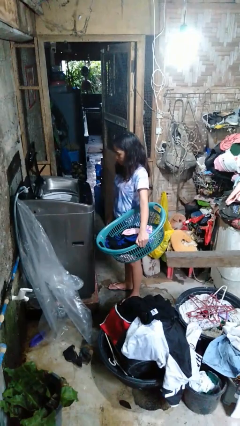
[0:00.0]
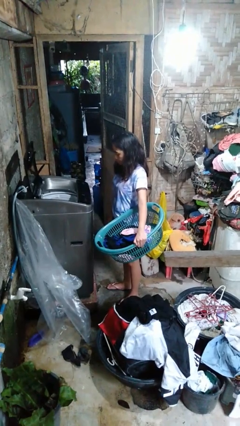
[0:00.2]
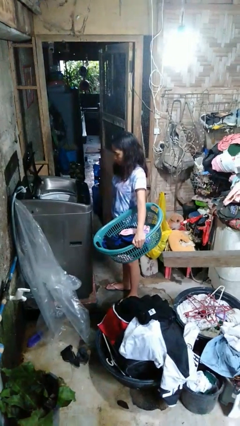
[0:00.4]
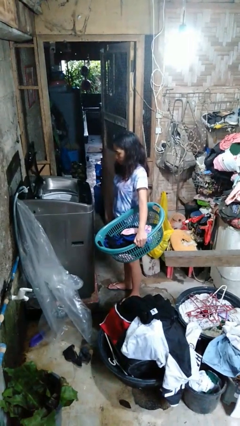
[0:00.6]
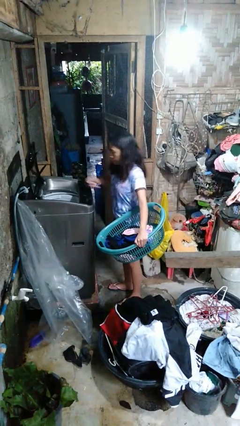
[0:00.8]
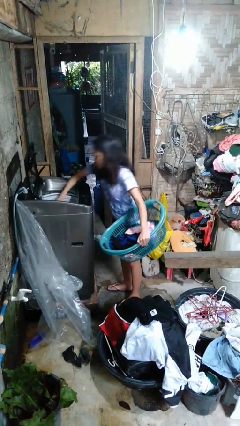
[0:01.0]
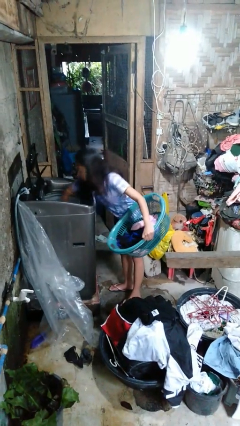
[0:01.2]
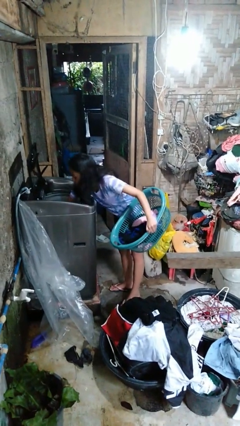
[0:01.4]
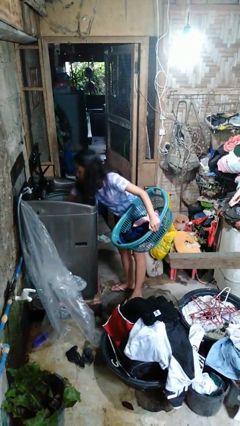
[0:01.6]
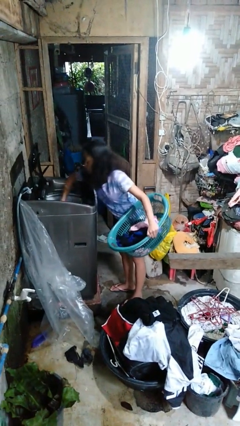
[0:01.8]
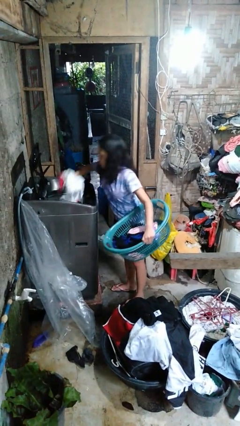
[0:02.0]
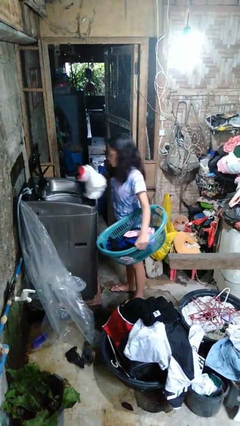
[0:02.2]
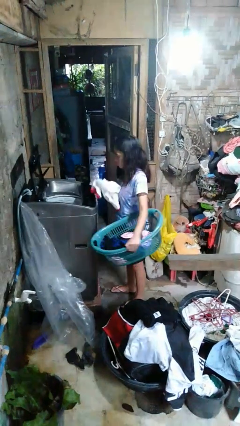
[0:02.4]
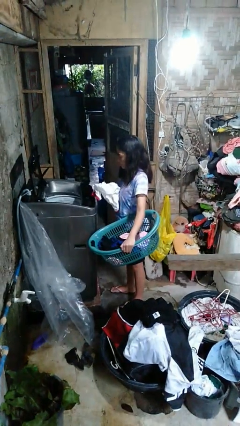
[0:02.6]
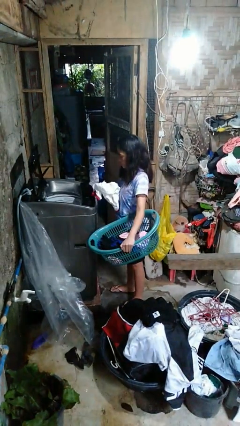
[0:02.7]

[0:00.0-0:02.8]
person unloads clotheswasher

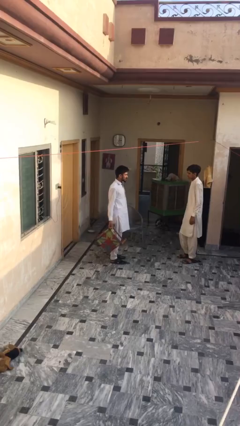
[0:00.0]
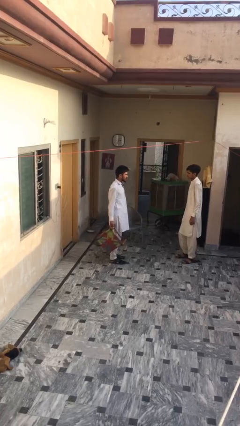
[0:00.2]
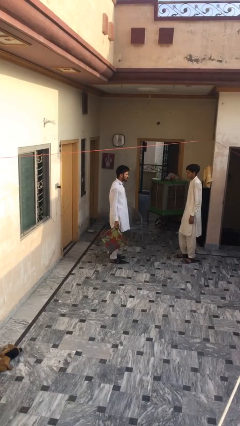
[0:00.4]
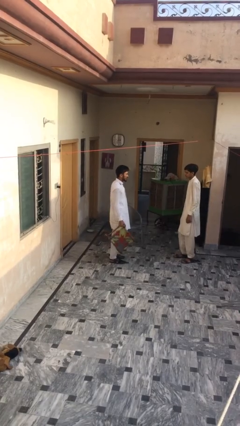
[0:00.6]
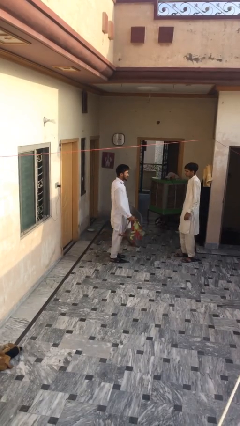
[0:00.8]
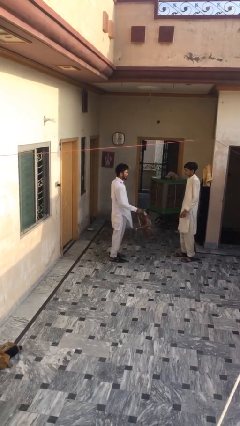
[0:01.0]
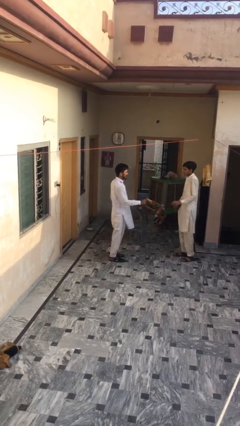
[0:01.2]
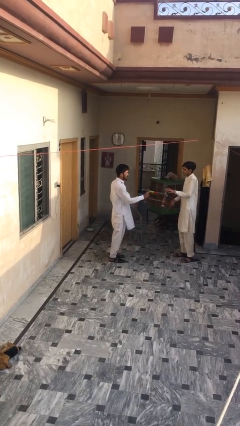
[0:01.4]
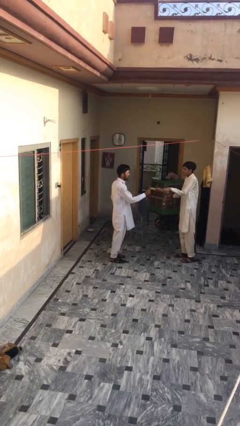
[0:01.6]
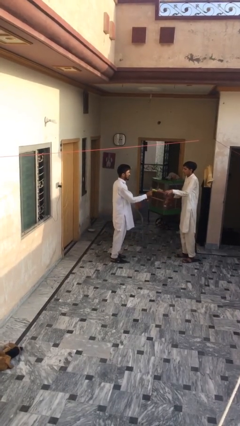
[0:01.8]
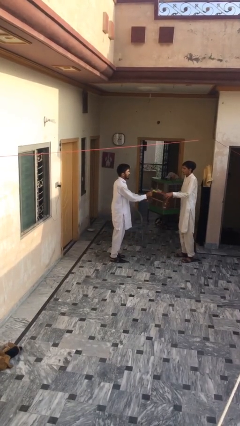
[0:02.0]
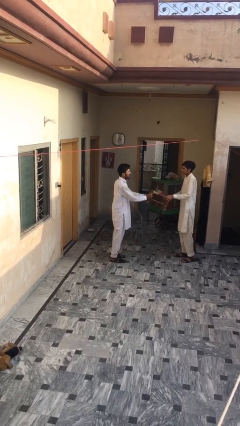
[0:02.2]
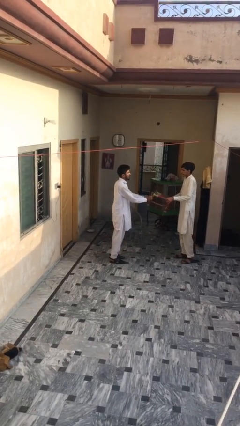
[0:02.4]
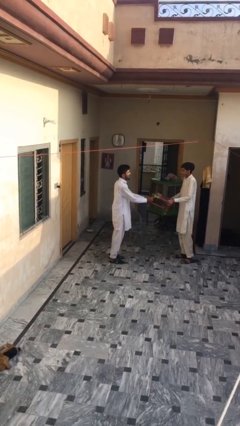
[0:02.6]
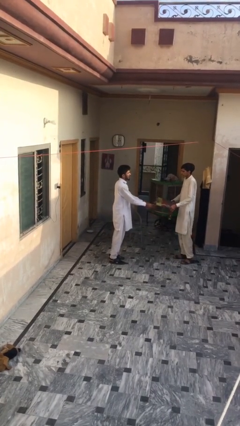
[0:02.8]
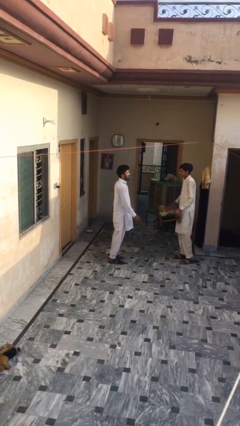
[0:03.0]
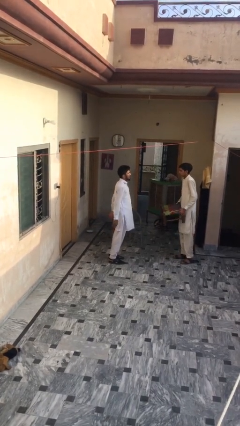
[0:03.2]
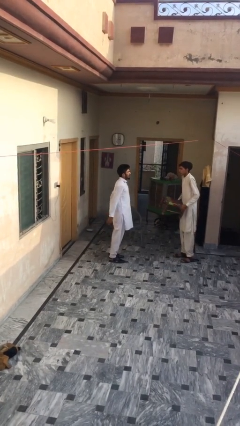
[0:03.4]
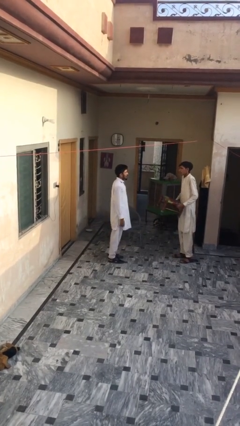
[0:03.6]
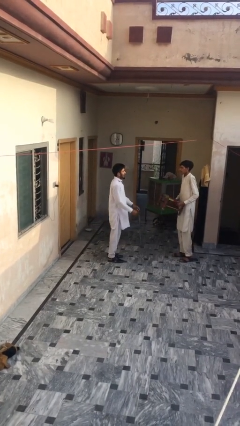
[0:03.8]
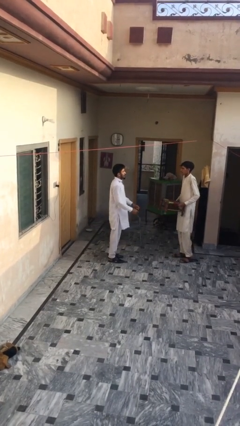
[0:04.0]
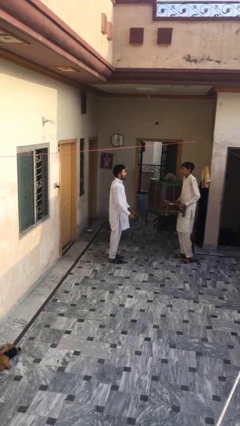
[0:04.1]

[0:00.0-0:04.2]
person transfers object to person

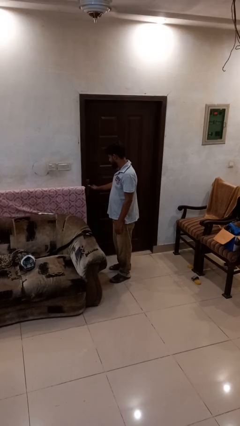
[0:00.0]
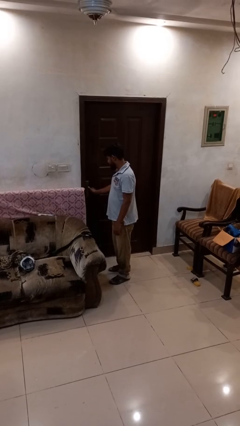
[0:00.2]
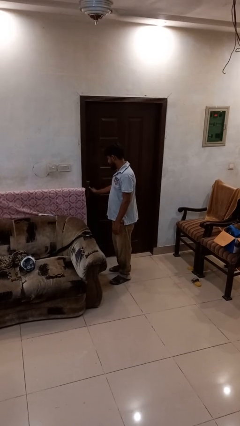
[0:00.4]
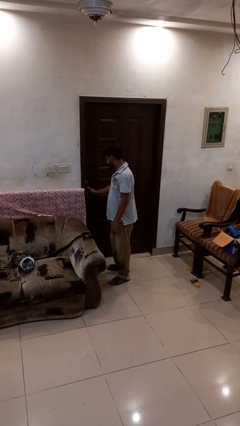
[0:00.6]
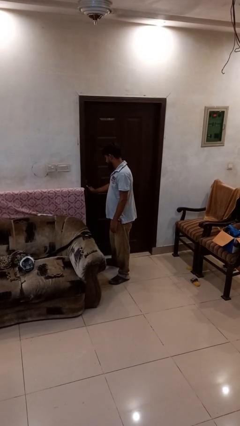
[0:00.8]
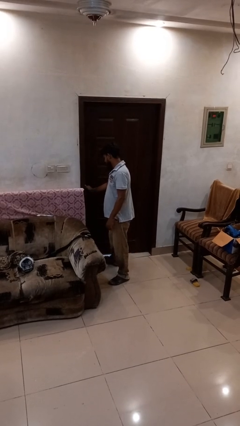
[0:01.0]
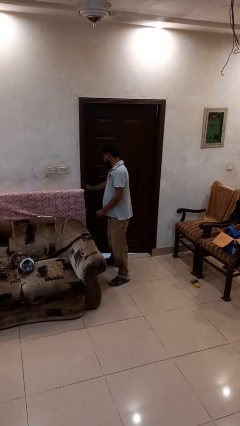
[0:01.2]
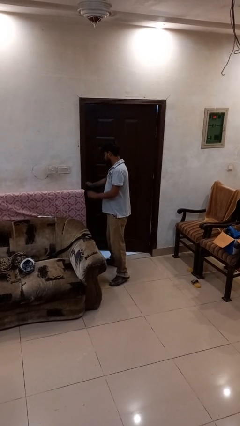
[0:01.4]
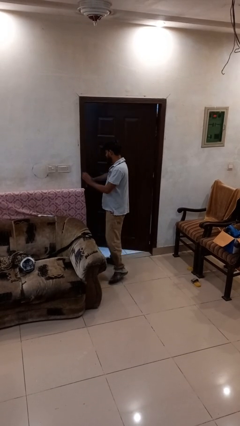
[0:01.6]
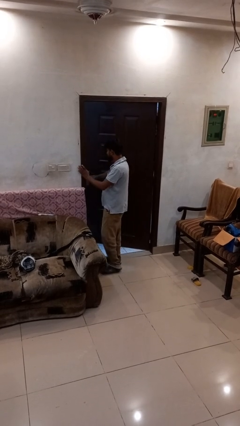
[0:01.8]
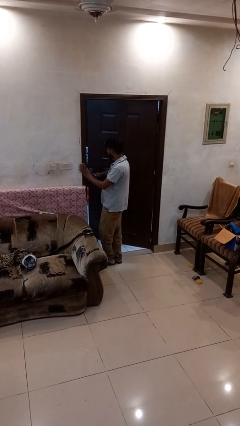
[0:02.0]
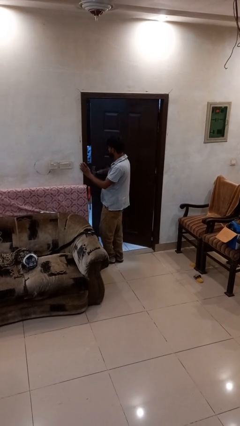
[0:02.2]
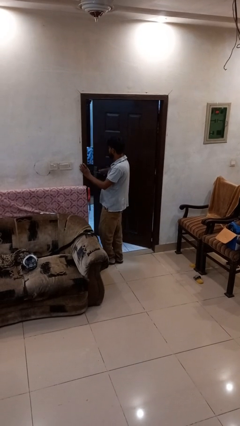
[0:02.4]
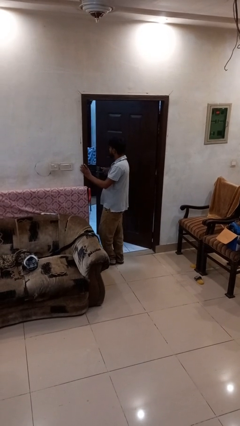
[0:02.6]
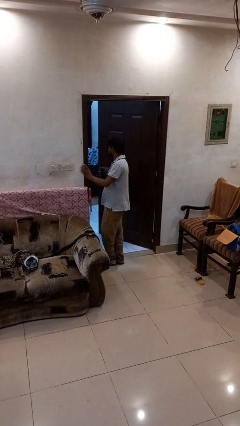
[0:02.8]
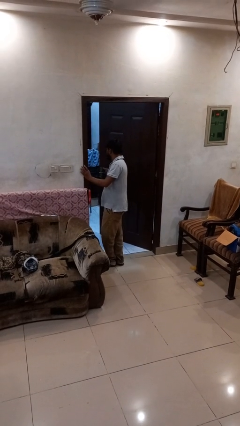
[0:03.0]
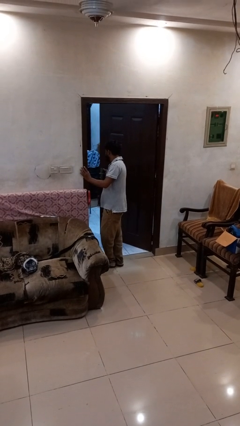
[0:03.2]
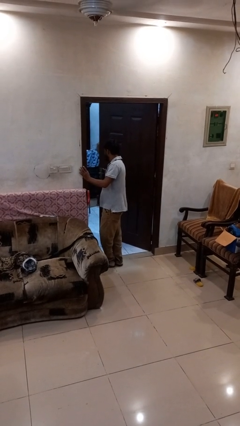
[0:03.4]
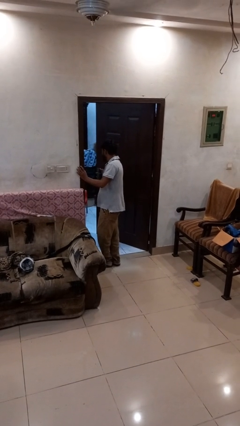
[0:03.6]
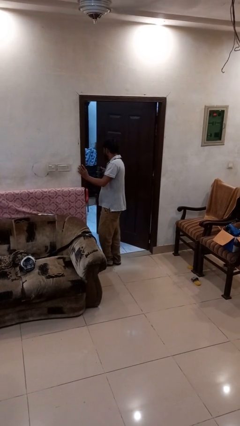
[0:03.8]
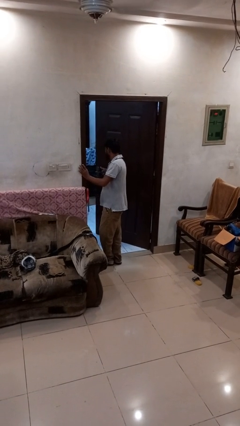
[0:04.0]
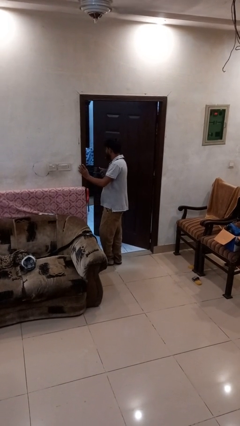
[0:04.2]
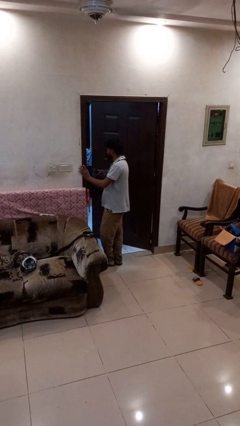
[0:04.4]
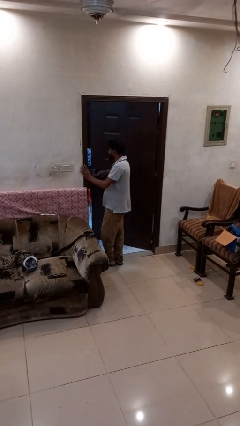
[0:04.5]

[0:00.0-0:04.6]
person opens facility door

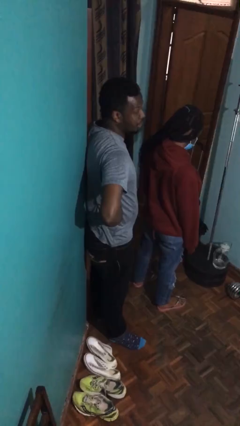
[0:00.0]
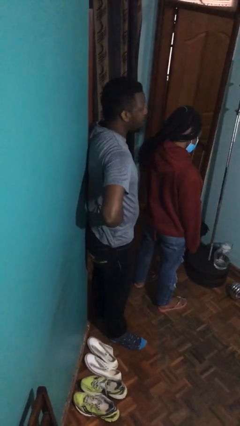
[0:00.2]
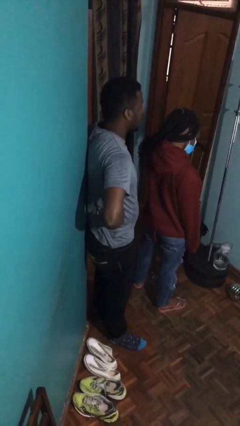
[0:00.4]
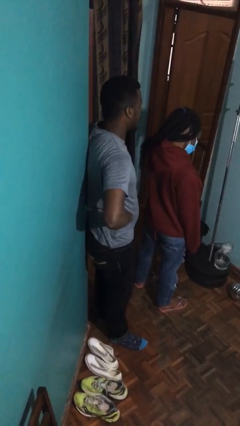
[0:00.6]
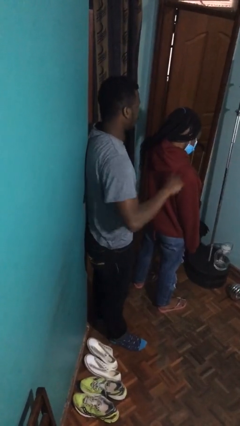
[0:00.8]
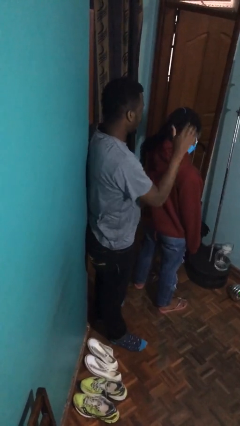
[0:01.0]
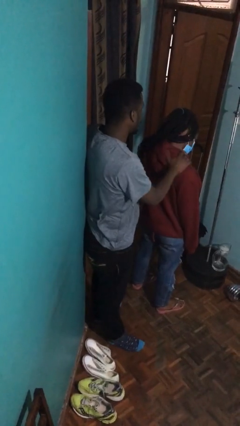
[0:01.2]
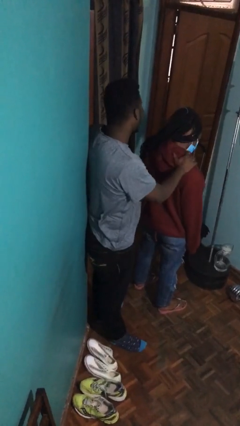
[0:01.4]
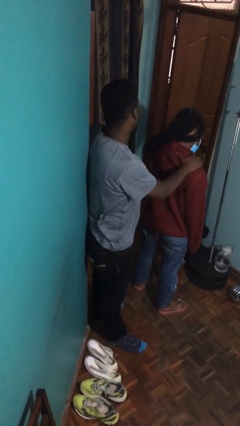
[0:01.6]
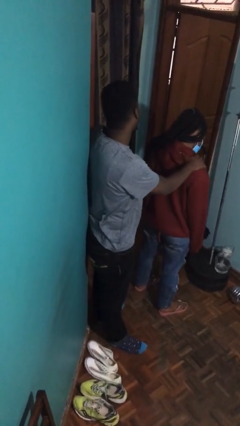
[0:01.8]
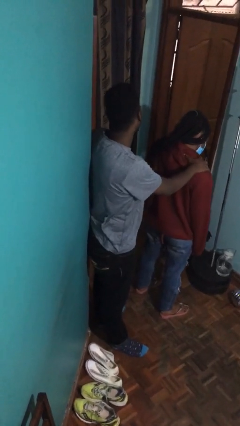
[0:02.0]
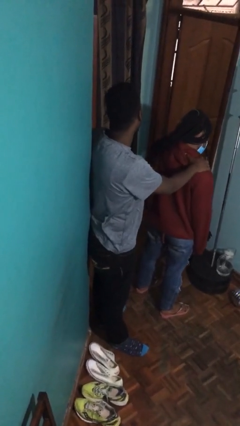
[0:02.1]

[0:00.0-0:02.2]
person grabs person by shoulder

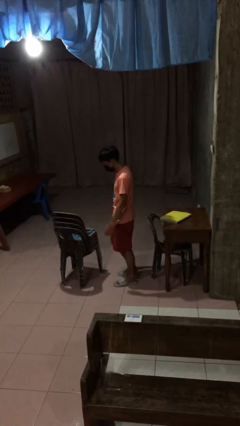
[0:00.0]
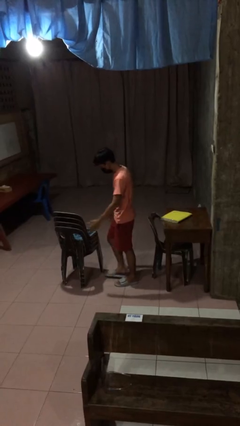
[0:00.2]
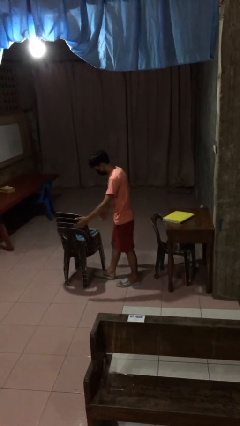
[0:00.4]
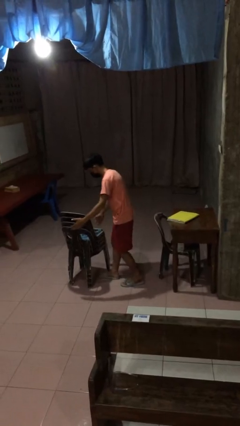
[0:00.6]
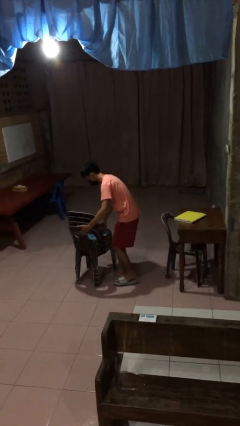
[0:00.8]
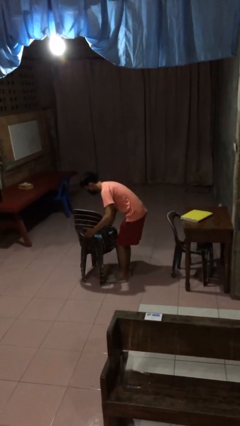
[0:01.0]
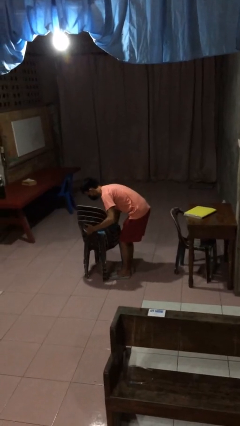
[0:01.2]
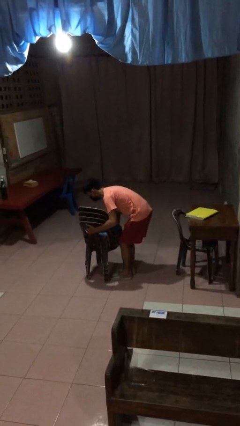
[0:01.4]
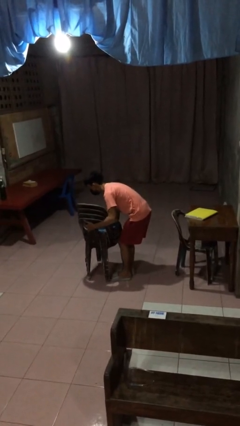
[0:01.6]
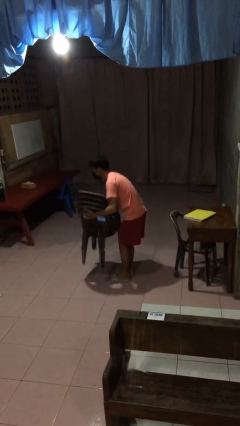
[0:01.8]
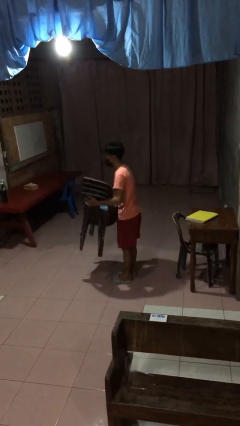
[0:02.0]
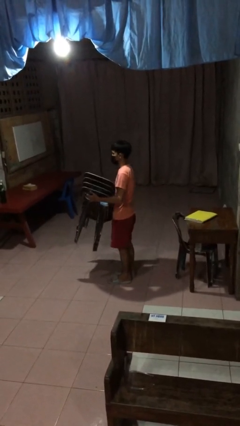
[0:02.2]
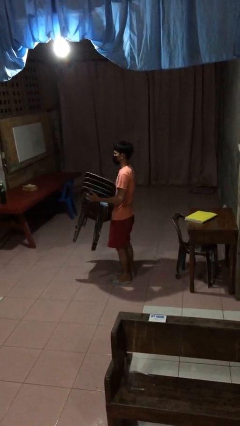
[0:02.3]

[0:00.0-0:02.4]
person picks up object from floor

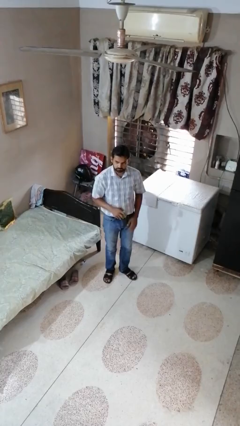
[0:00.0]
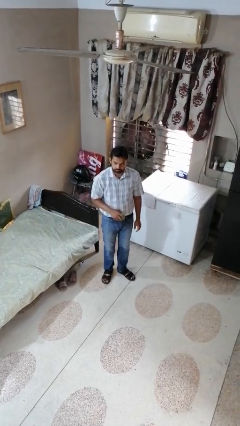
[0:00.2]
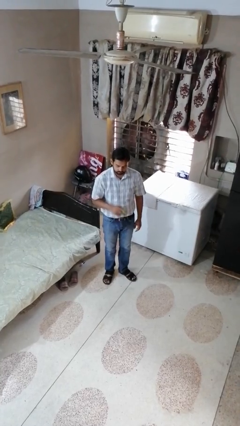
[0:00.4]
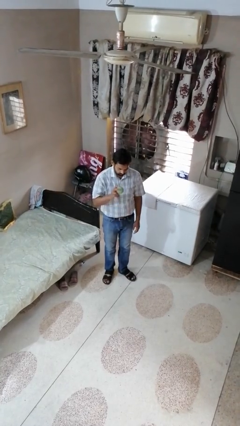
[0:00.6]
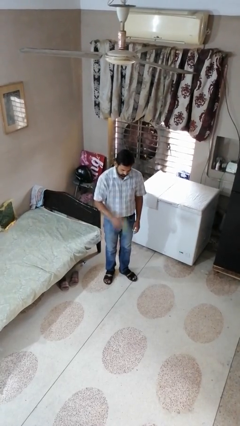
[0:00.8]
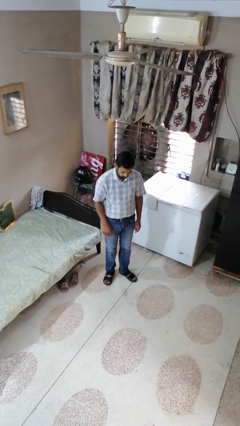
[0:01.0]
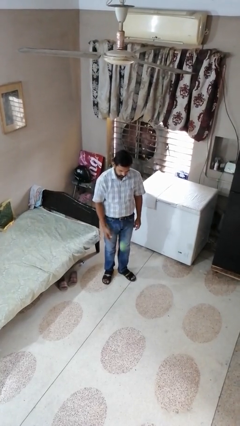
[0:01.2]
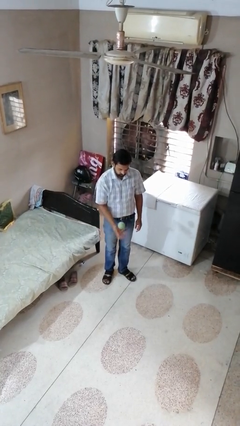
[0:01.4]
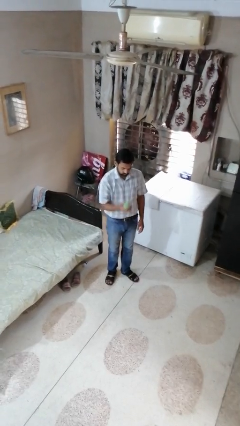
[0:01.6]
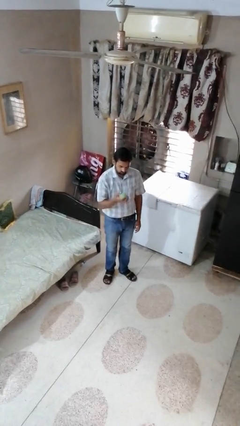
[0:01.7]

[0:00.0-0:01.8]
person bounces ball on floor
